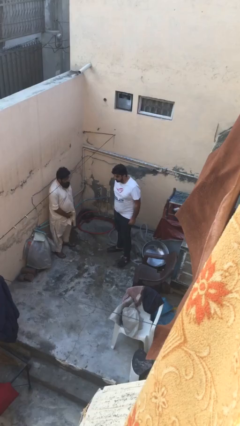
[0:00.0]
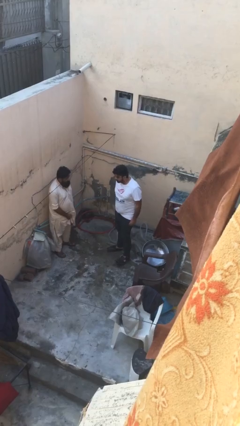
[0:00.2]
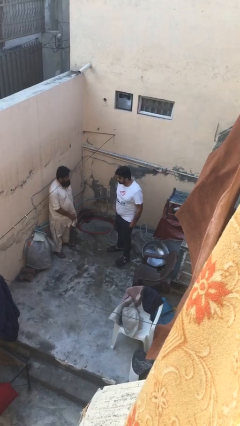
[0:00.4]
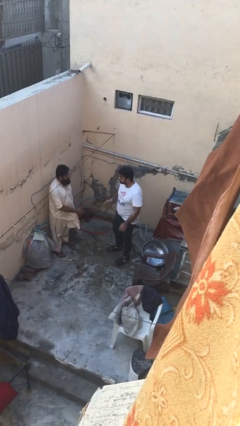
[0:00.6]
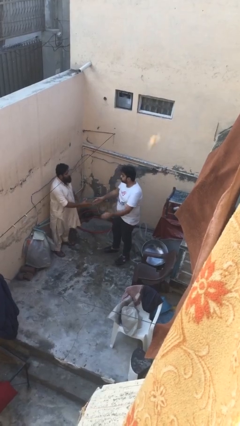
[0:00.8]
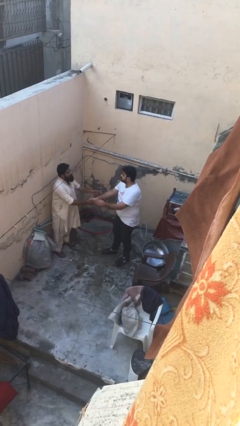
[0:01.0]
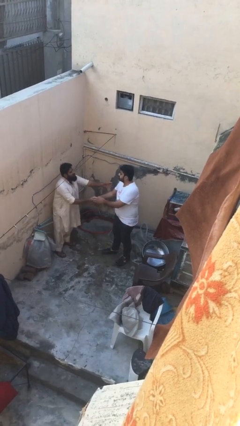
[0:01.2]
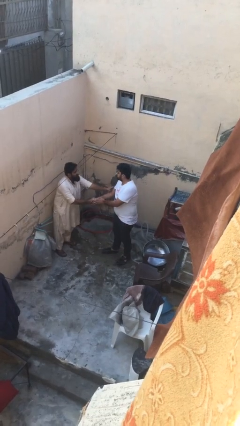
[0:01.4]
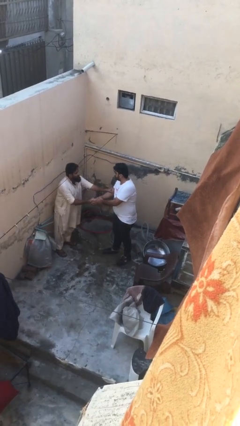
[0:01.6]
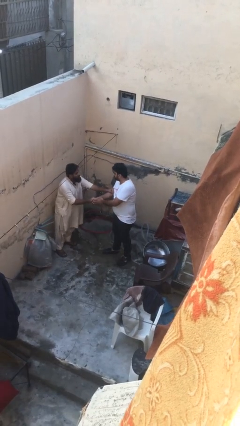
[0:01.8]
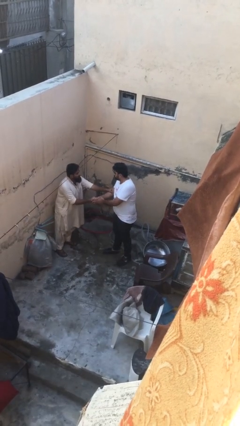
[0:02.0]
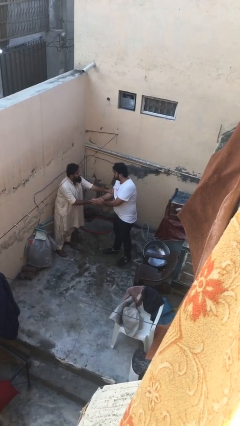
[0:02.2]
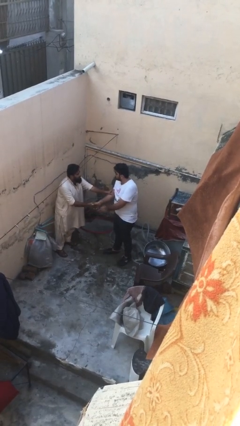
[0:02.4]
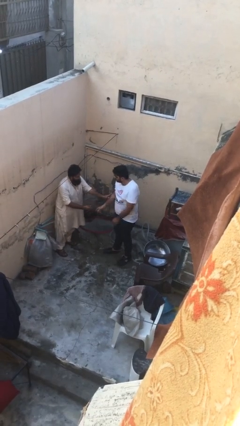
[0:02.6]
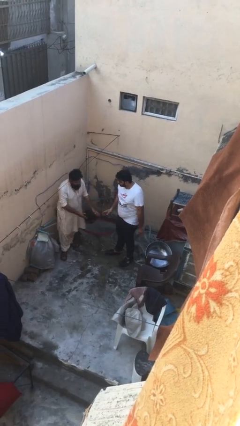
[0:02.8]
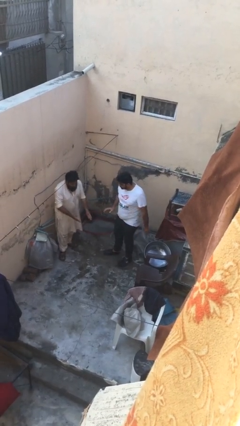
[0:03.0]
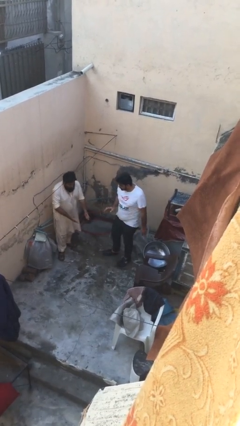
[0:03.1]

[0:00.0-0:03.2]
person shakes hand

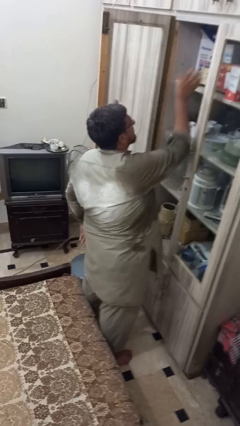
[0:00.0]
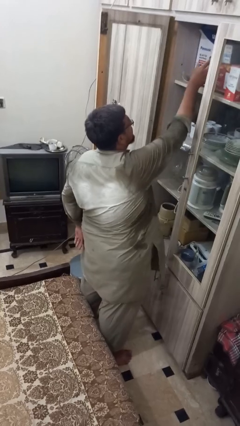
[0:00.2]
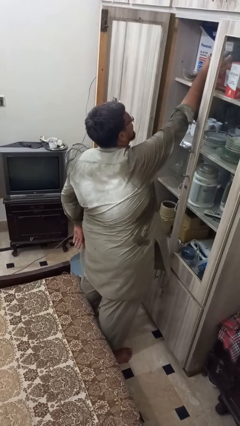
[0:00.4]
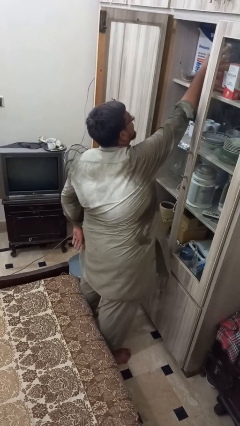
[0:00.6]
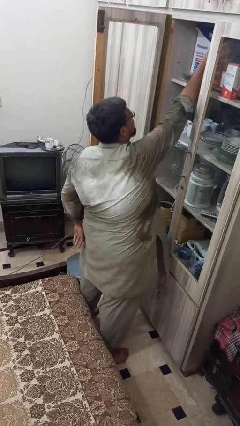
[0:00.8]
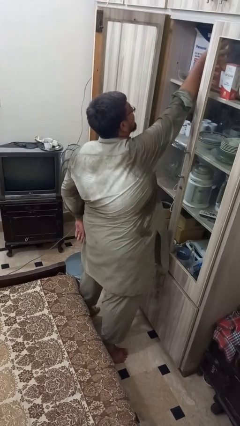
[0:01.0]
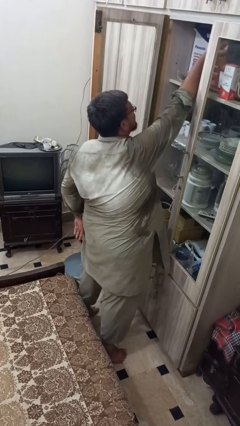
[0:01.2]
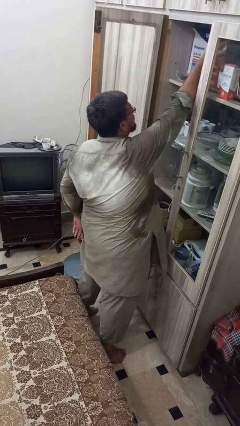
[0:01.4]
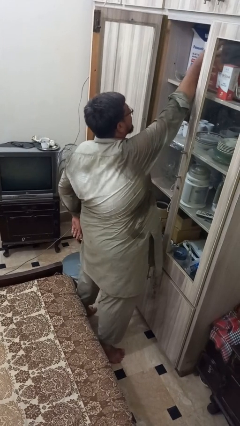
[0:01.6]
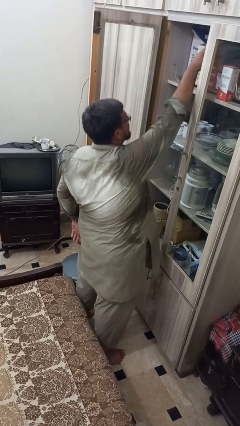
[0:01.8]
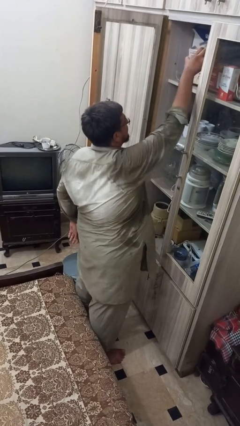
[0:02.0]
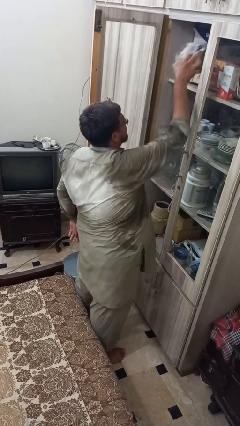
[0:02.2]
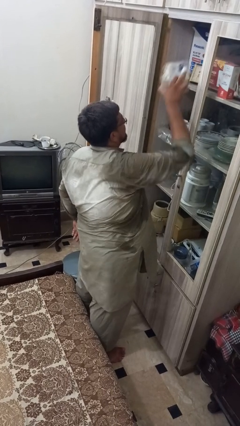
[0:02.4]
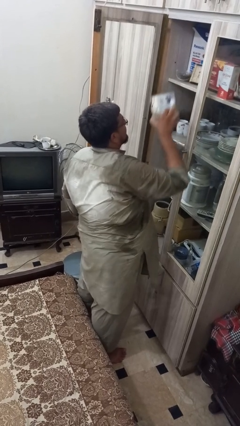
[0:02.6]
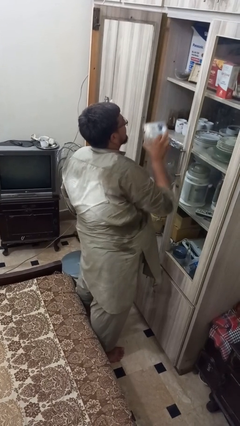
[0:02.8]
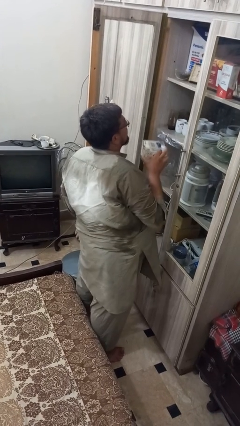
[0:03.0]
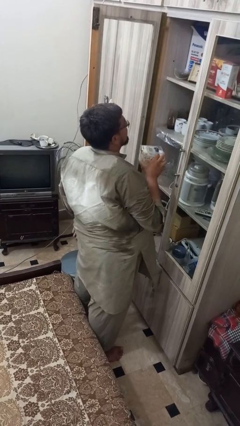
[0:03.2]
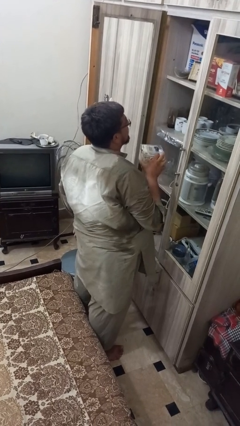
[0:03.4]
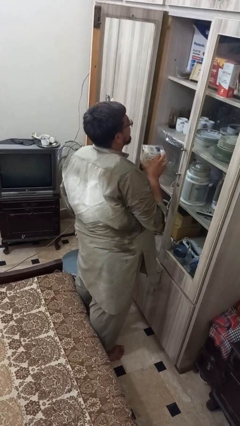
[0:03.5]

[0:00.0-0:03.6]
person picks up object from shelf

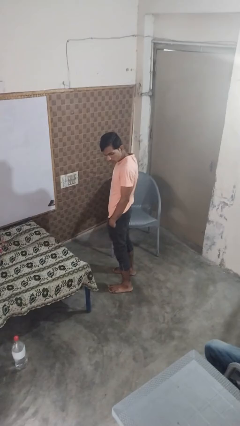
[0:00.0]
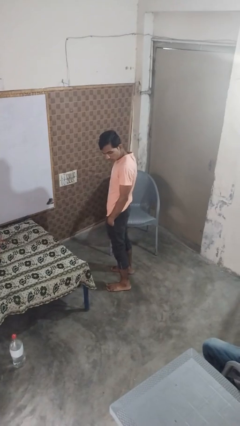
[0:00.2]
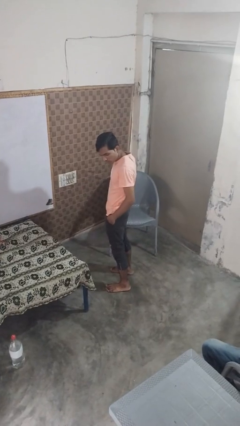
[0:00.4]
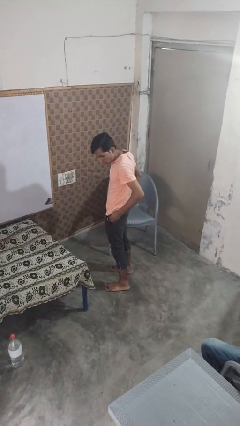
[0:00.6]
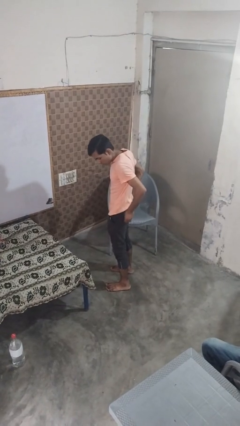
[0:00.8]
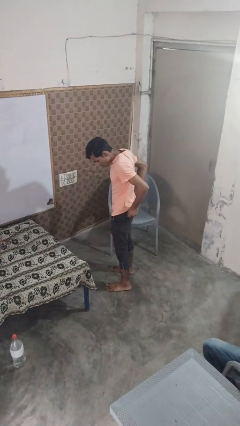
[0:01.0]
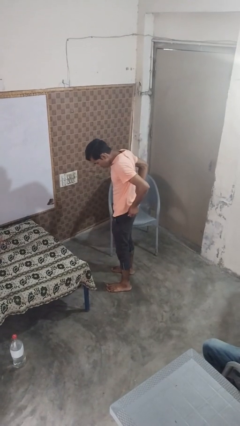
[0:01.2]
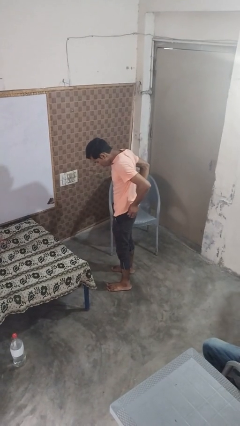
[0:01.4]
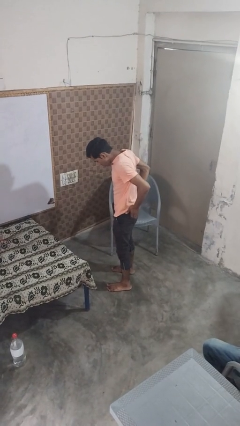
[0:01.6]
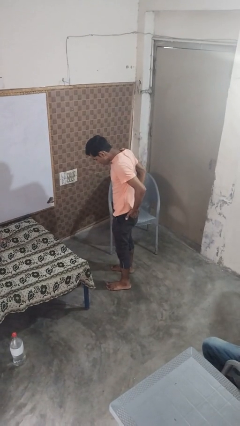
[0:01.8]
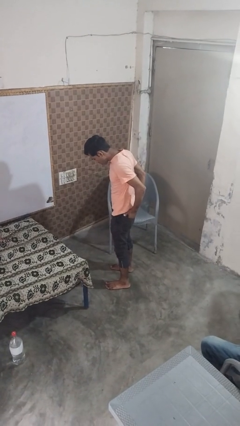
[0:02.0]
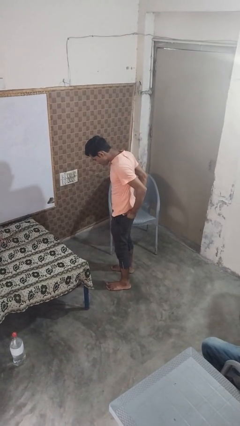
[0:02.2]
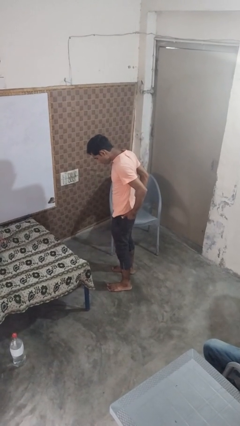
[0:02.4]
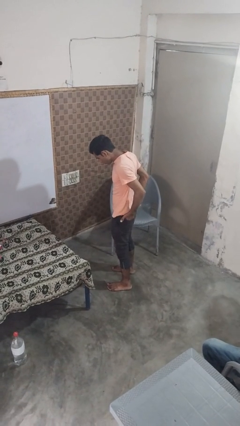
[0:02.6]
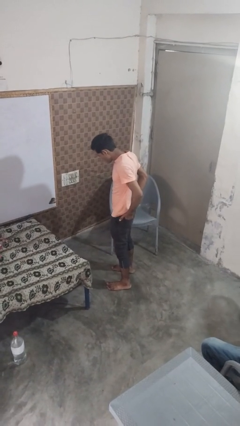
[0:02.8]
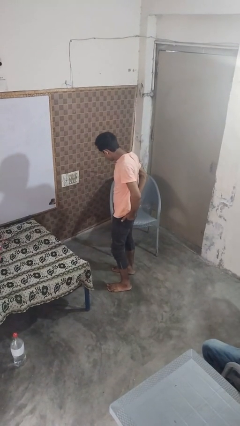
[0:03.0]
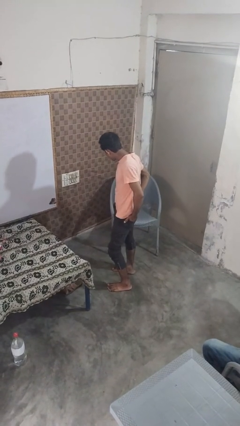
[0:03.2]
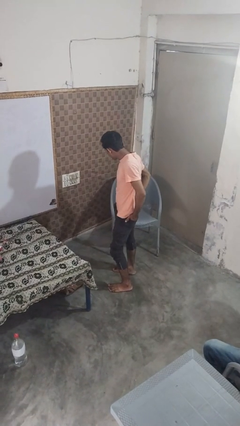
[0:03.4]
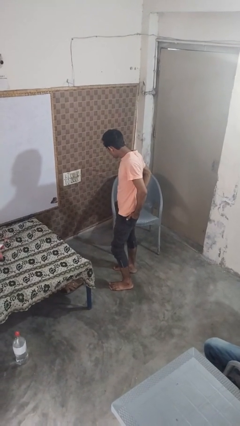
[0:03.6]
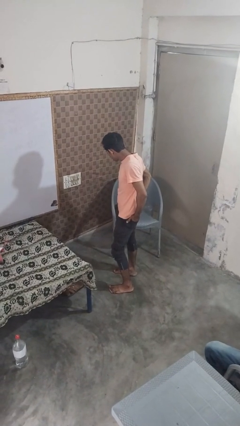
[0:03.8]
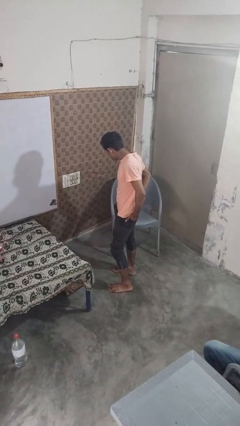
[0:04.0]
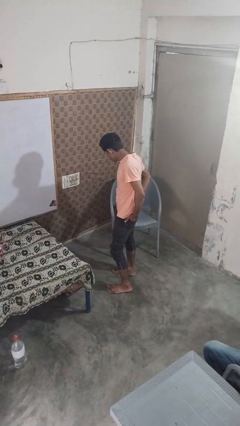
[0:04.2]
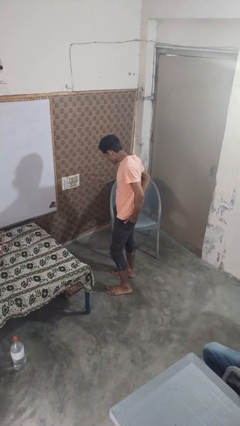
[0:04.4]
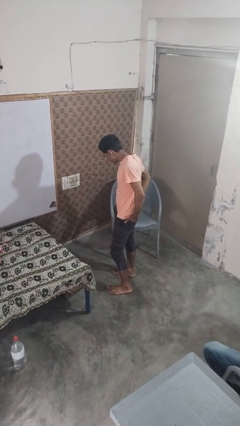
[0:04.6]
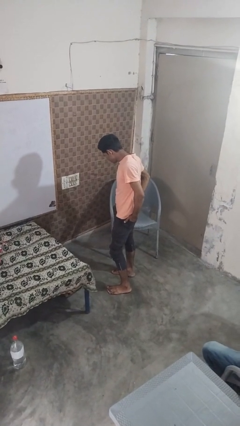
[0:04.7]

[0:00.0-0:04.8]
person puts hands in back pockets

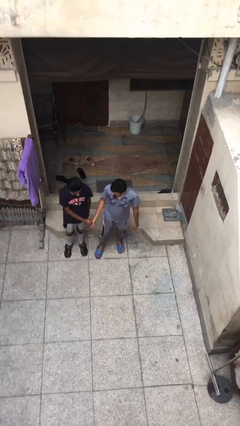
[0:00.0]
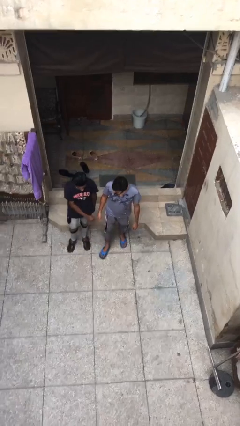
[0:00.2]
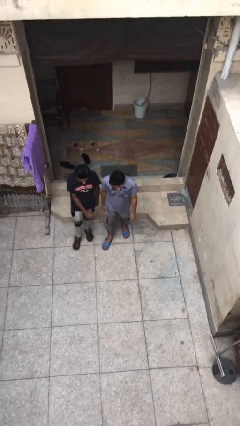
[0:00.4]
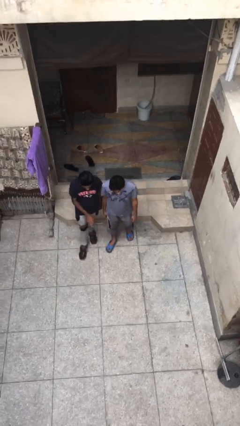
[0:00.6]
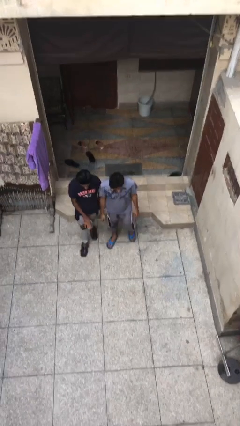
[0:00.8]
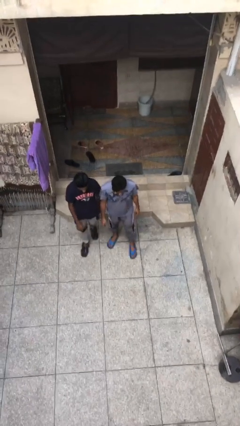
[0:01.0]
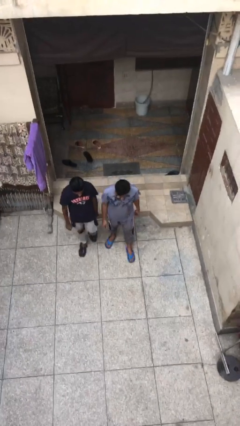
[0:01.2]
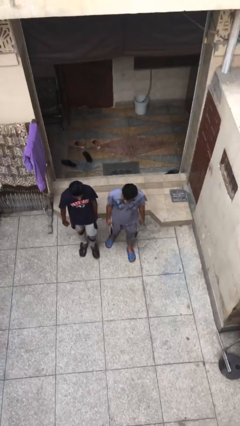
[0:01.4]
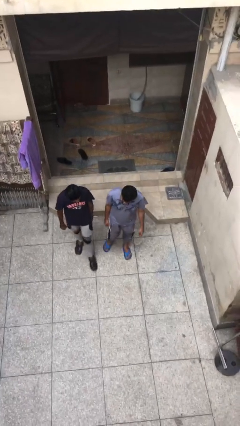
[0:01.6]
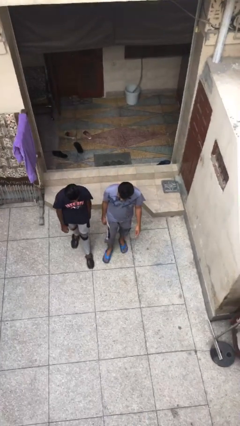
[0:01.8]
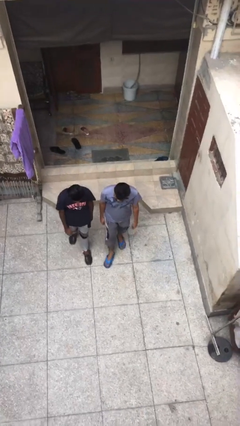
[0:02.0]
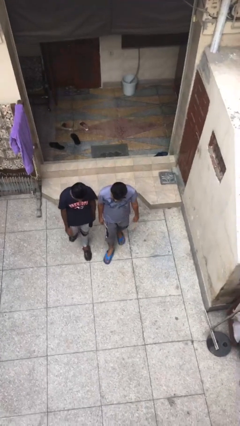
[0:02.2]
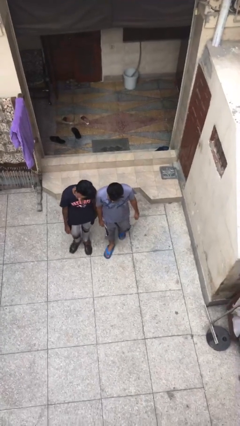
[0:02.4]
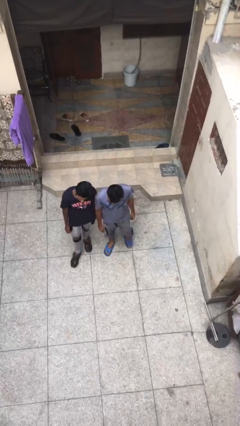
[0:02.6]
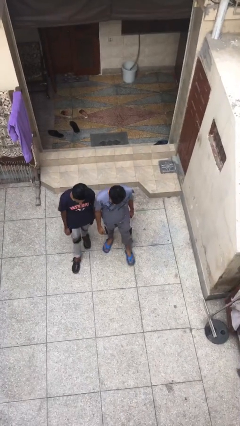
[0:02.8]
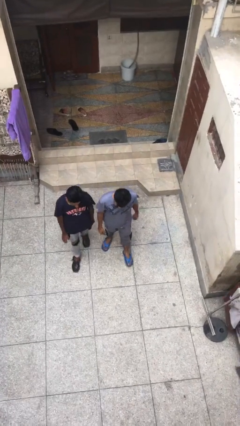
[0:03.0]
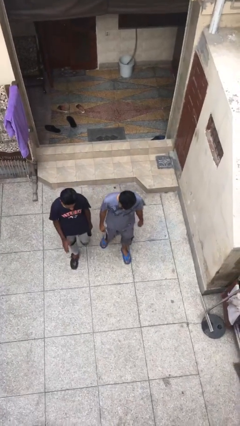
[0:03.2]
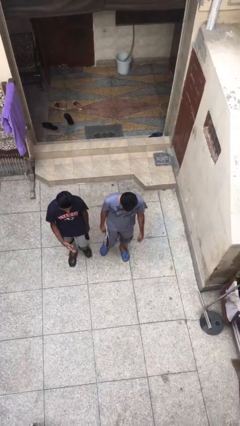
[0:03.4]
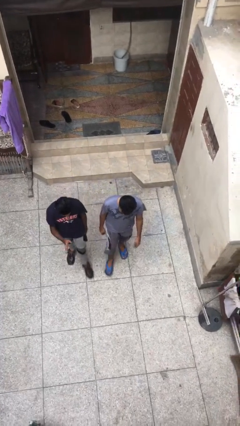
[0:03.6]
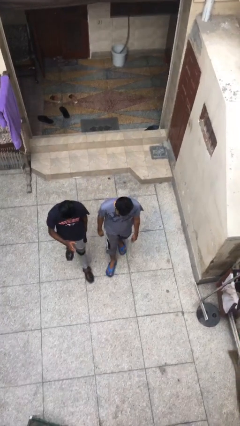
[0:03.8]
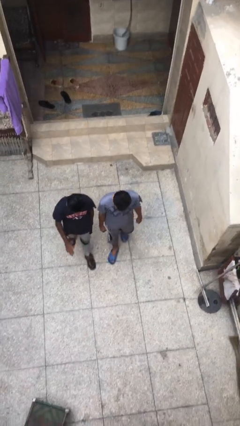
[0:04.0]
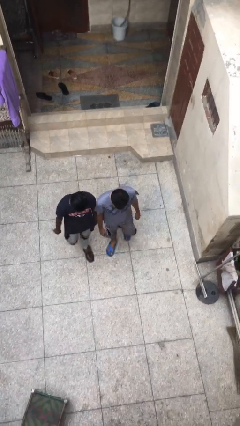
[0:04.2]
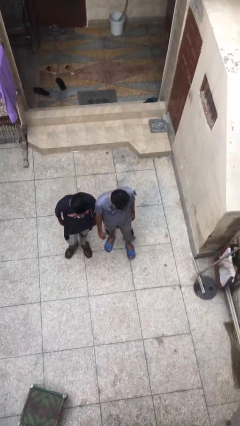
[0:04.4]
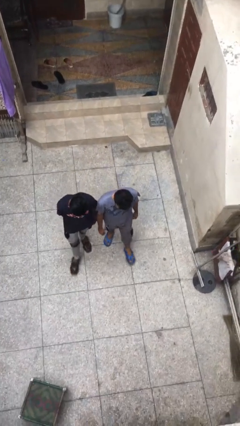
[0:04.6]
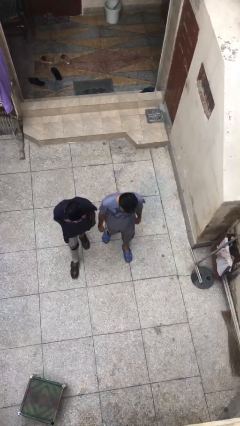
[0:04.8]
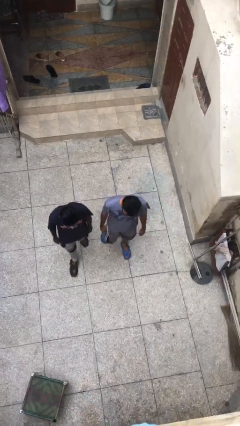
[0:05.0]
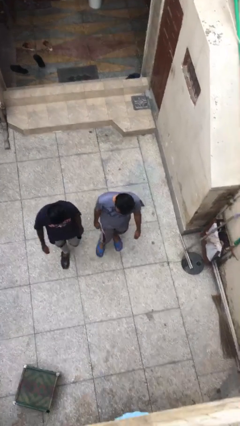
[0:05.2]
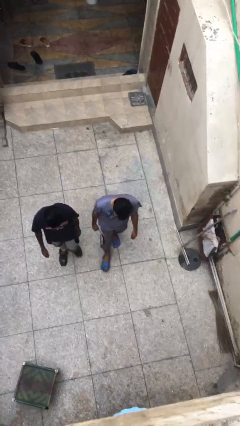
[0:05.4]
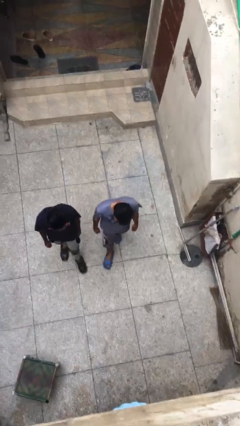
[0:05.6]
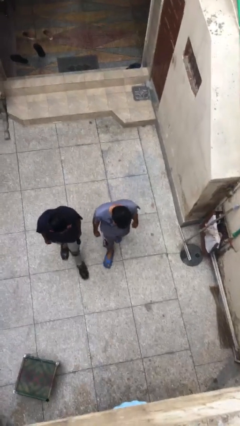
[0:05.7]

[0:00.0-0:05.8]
person talks to person
